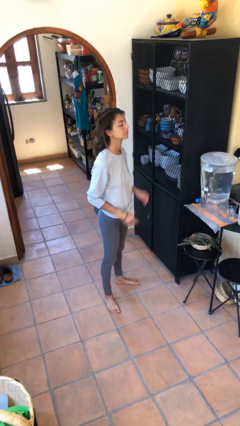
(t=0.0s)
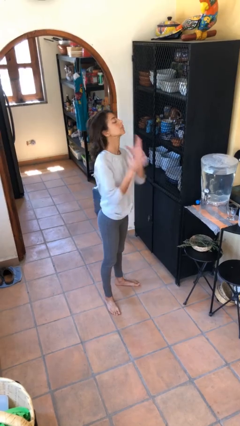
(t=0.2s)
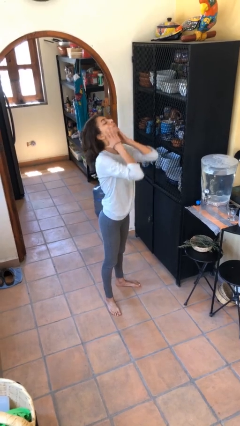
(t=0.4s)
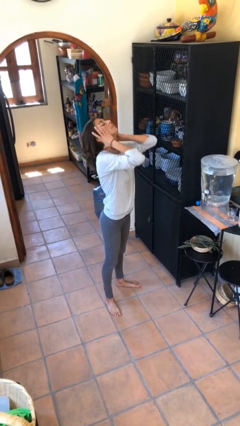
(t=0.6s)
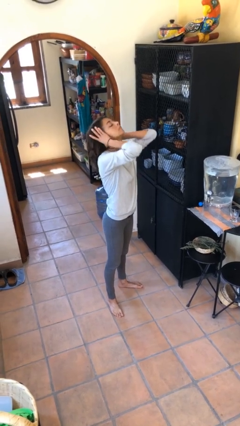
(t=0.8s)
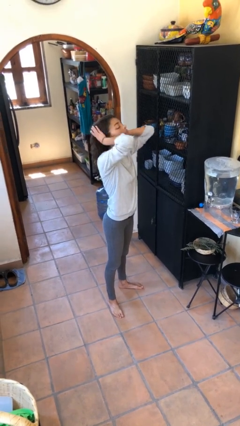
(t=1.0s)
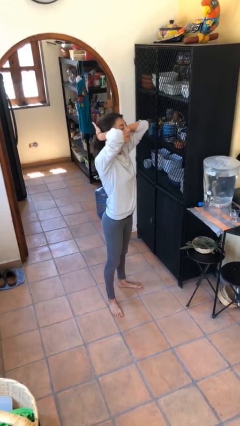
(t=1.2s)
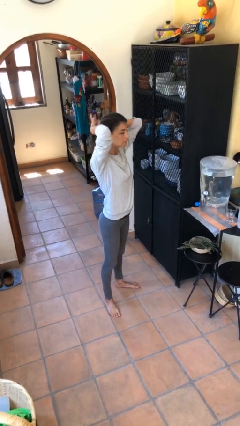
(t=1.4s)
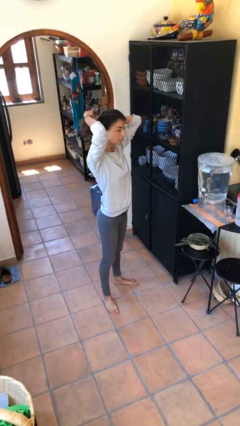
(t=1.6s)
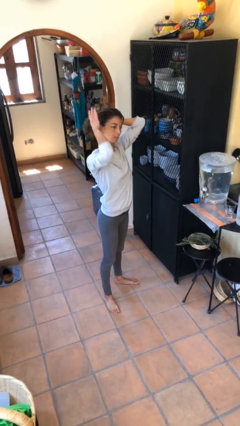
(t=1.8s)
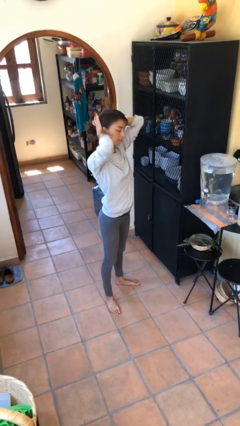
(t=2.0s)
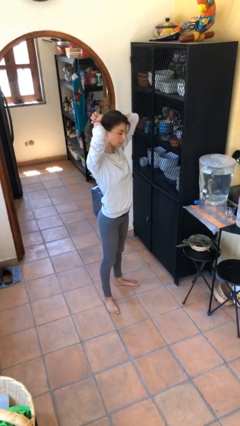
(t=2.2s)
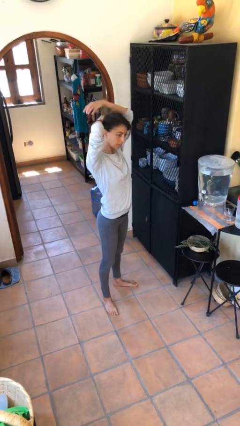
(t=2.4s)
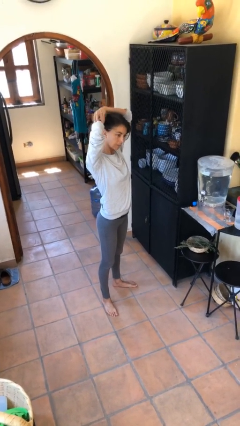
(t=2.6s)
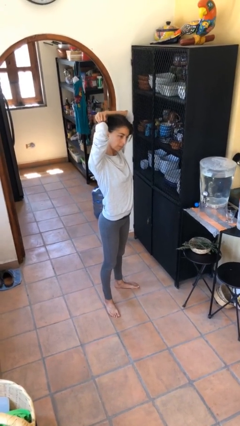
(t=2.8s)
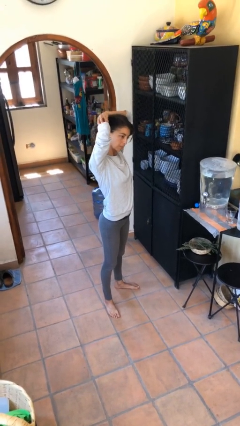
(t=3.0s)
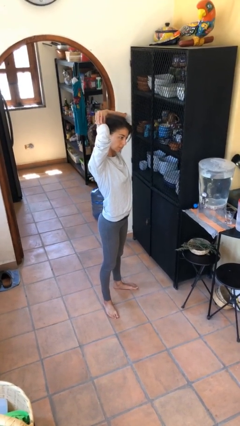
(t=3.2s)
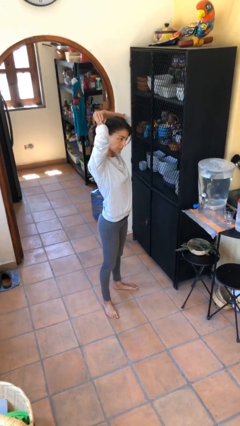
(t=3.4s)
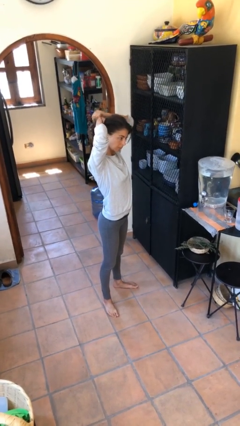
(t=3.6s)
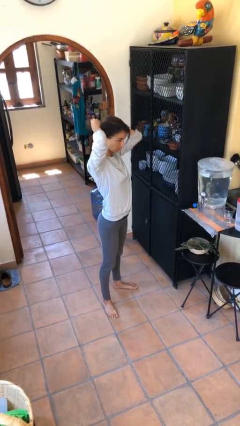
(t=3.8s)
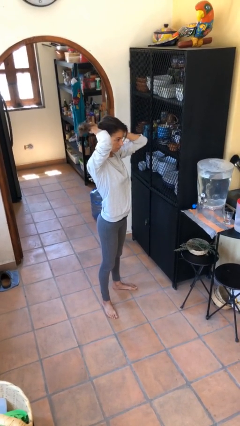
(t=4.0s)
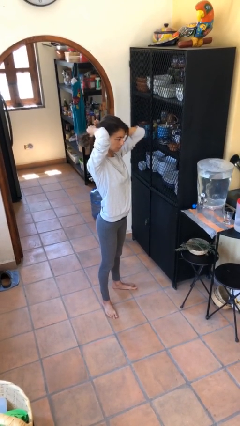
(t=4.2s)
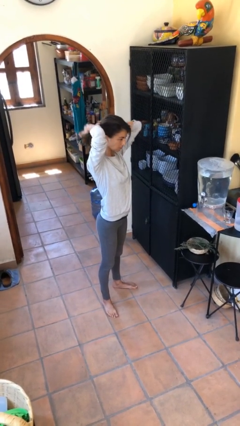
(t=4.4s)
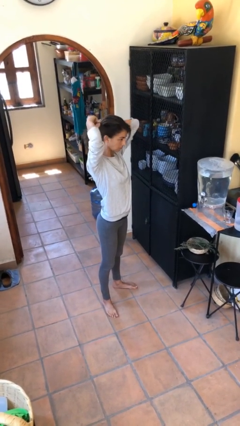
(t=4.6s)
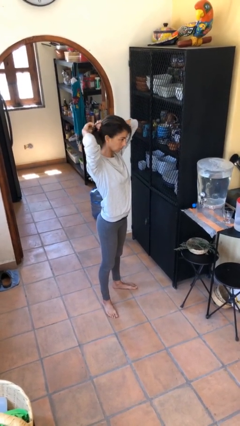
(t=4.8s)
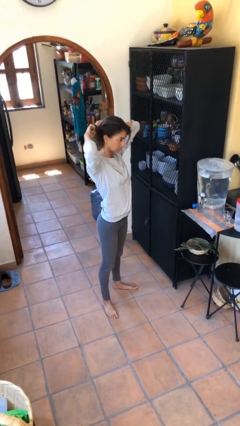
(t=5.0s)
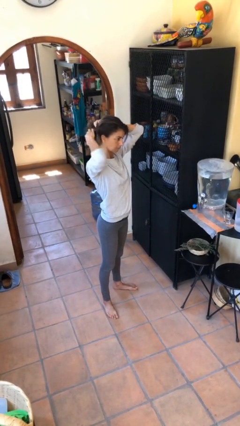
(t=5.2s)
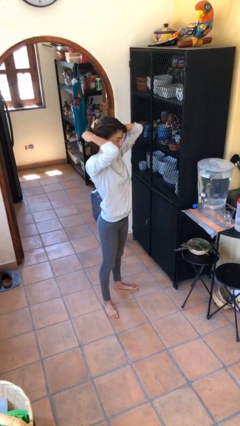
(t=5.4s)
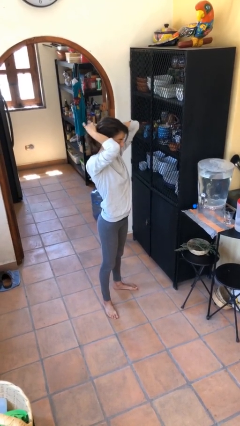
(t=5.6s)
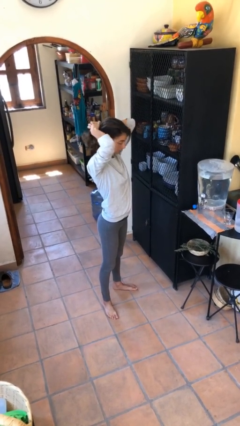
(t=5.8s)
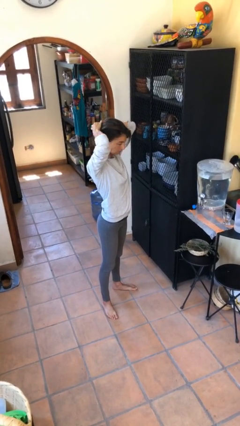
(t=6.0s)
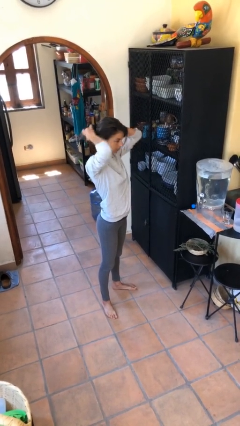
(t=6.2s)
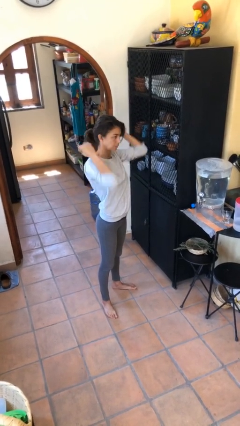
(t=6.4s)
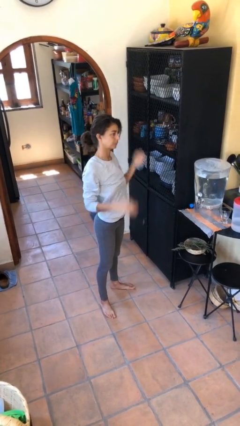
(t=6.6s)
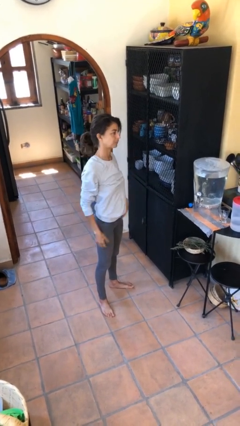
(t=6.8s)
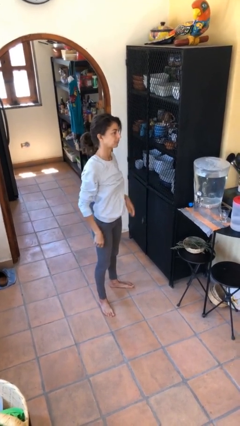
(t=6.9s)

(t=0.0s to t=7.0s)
person puts hair in ponytail

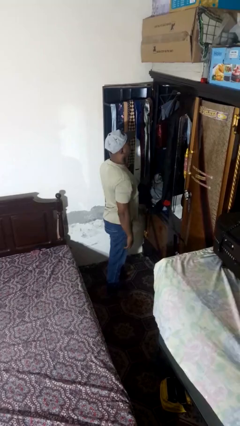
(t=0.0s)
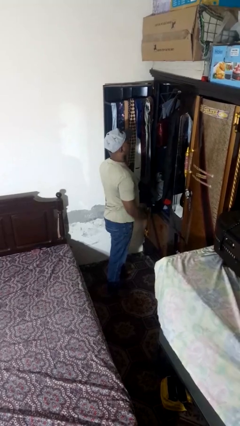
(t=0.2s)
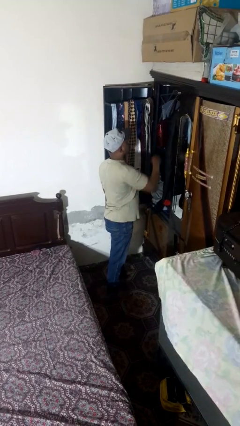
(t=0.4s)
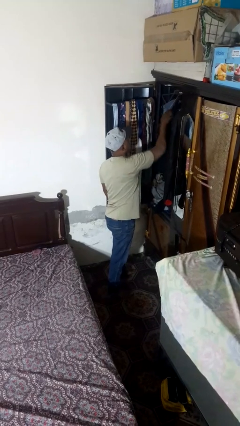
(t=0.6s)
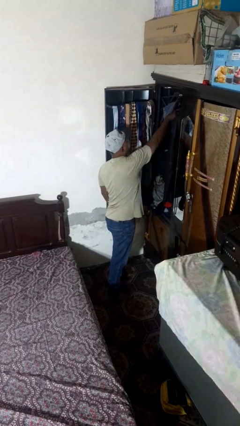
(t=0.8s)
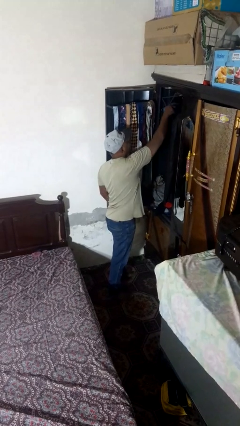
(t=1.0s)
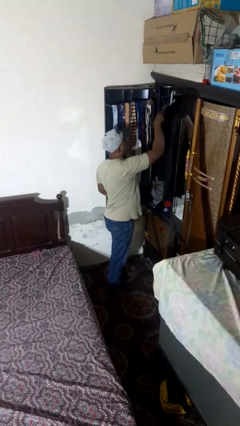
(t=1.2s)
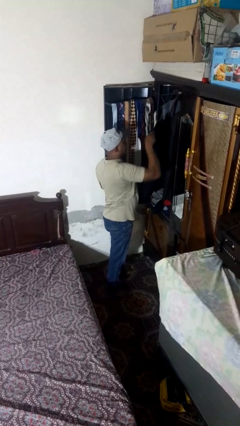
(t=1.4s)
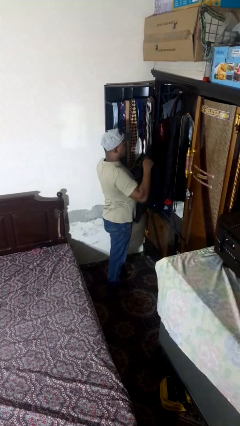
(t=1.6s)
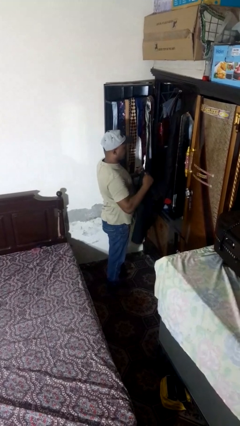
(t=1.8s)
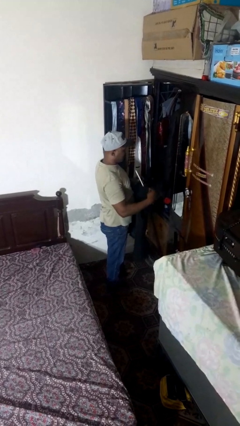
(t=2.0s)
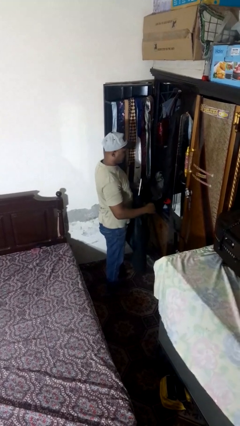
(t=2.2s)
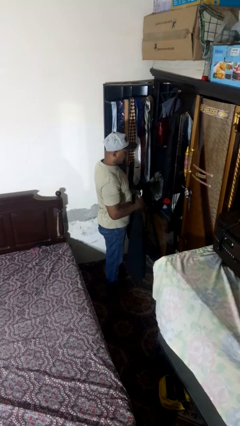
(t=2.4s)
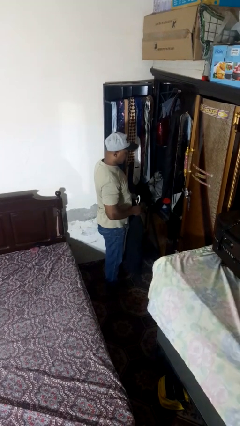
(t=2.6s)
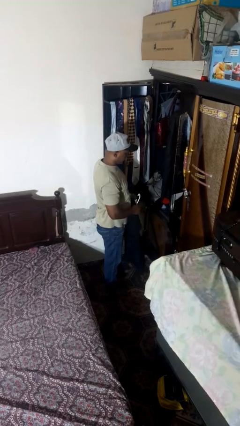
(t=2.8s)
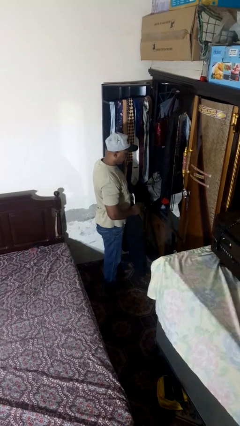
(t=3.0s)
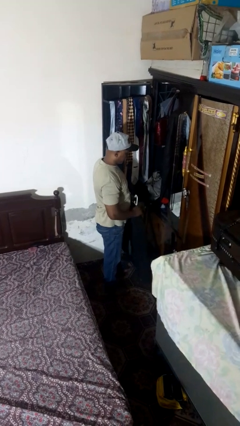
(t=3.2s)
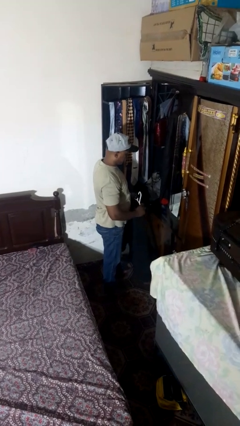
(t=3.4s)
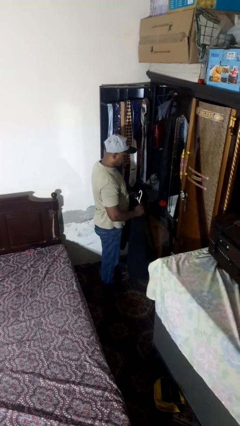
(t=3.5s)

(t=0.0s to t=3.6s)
person takes clothes from closet

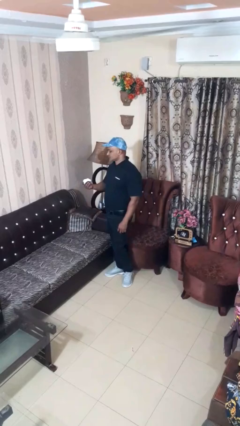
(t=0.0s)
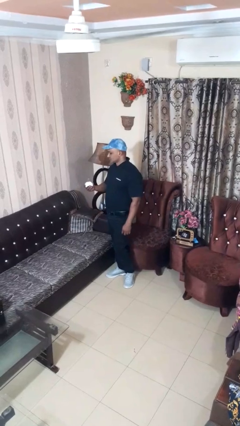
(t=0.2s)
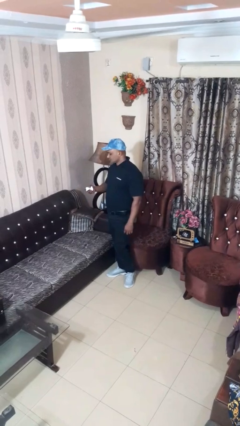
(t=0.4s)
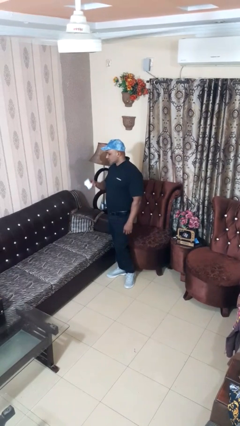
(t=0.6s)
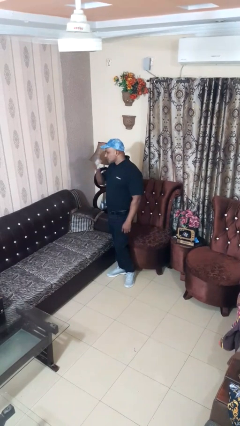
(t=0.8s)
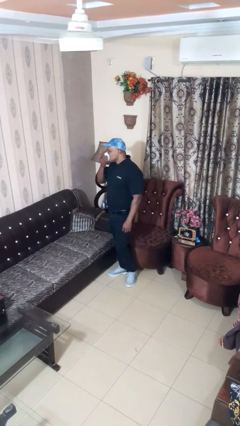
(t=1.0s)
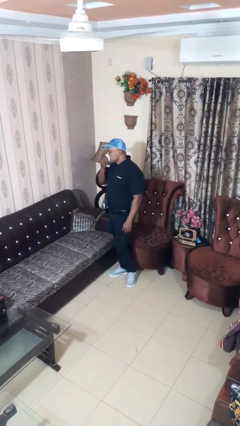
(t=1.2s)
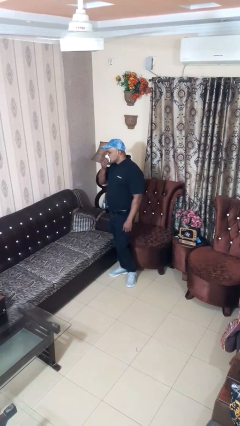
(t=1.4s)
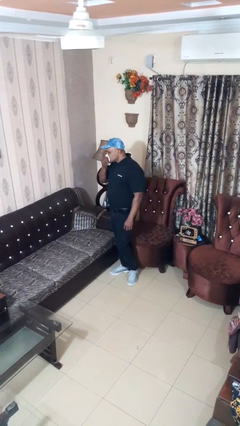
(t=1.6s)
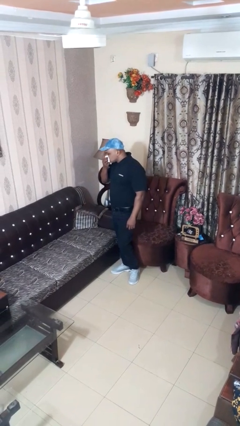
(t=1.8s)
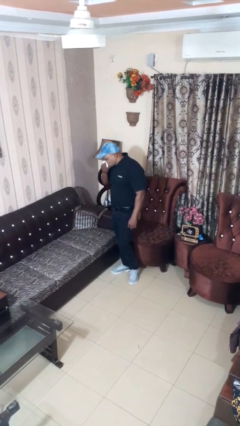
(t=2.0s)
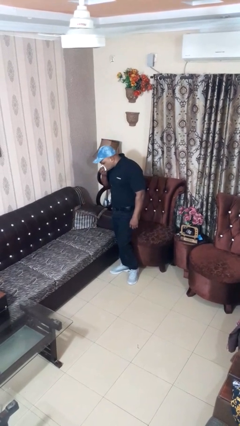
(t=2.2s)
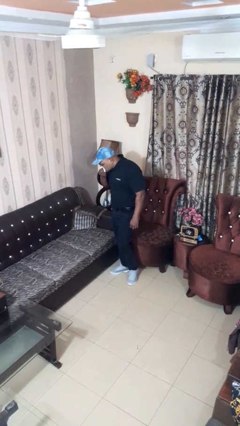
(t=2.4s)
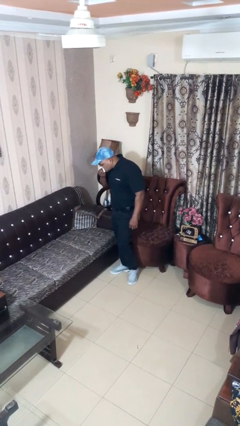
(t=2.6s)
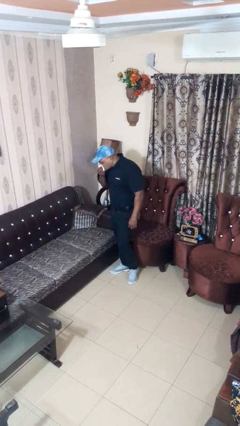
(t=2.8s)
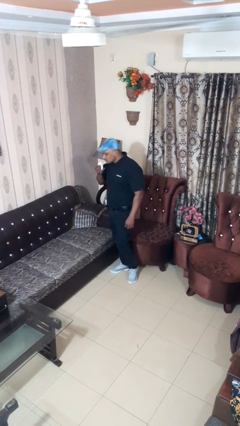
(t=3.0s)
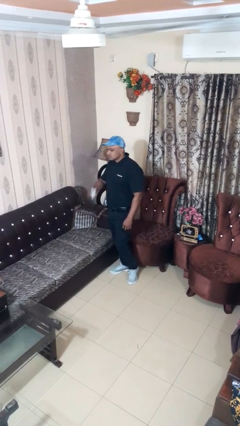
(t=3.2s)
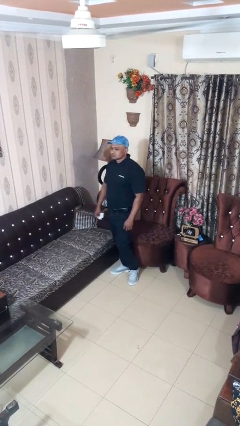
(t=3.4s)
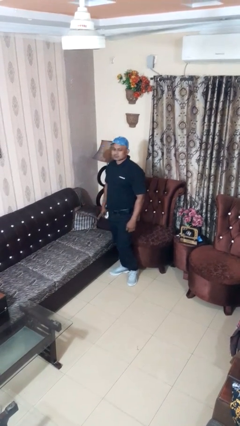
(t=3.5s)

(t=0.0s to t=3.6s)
person blows nose

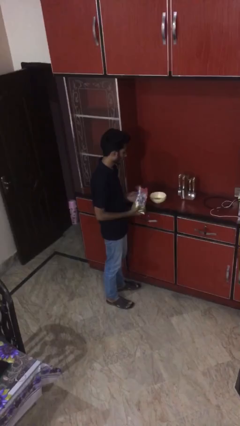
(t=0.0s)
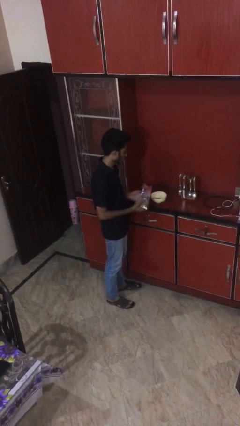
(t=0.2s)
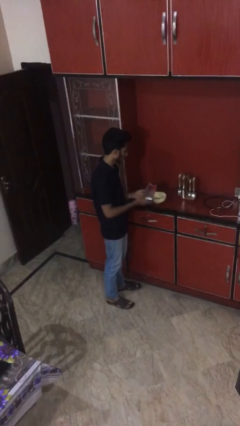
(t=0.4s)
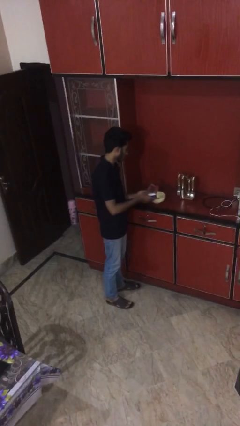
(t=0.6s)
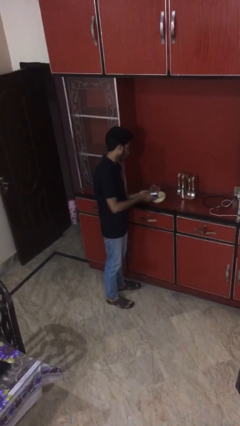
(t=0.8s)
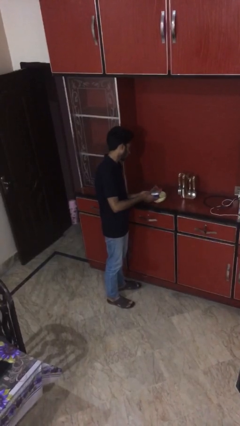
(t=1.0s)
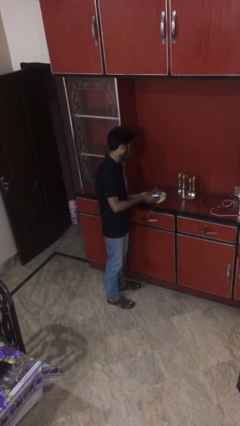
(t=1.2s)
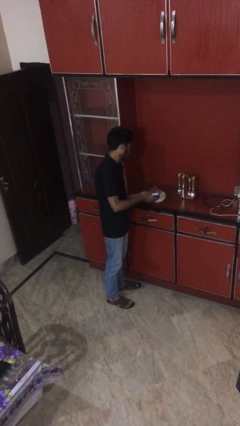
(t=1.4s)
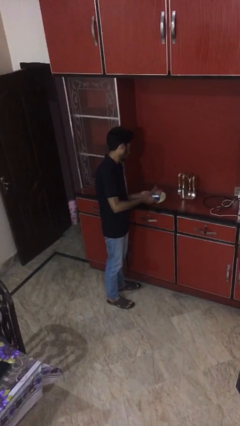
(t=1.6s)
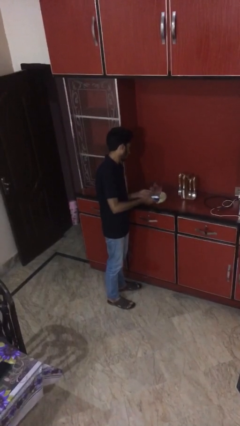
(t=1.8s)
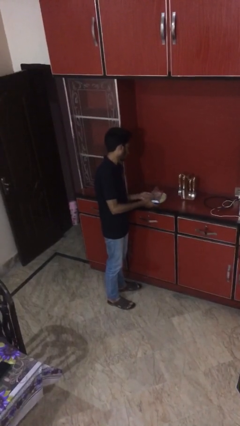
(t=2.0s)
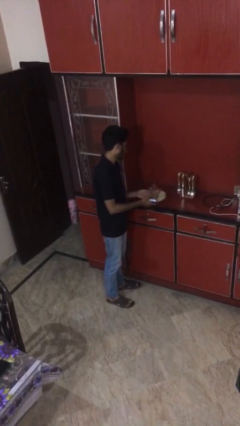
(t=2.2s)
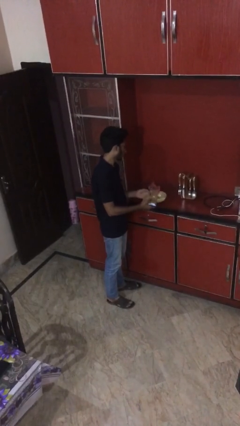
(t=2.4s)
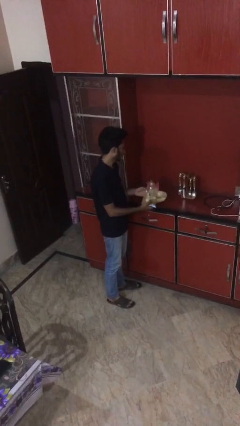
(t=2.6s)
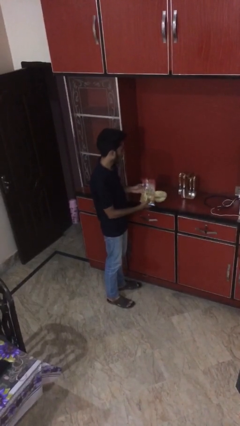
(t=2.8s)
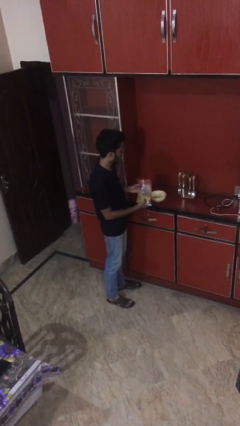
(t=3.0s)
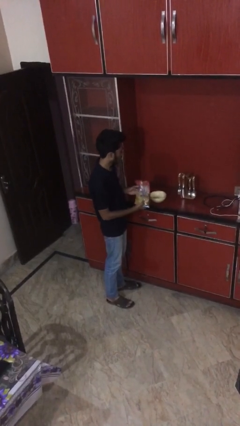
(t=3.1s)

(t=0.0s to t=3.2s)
person pours into bowl

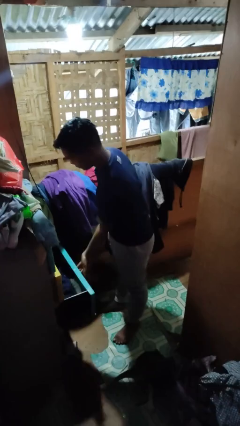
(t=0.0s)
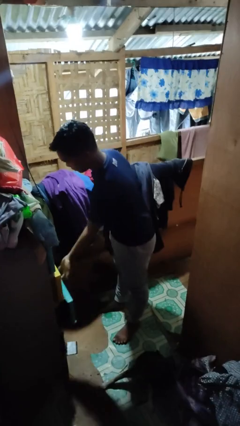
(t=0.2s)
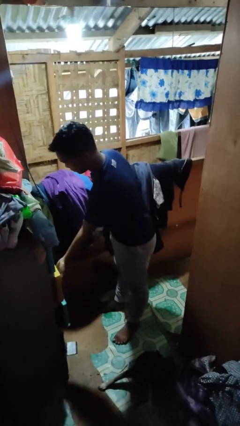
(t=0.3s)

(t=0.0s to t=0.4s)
person closes dresser drawer
